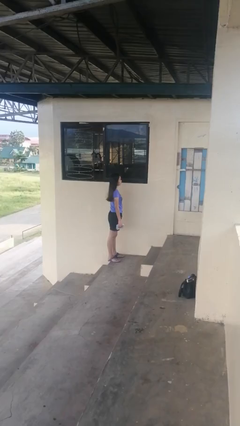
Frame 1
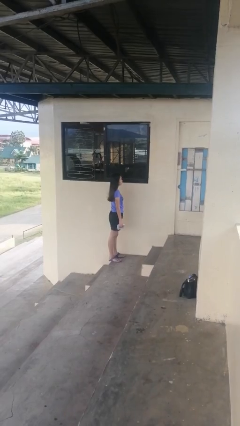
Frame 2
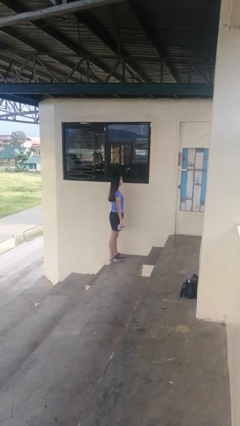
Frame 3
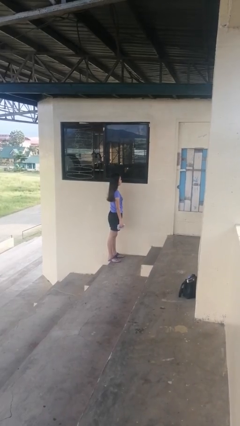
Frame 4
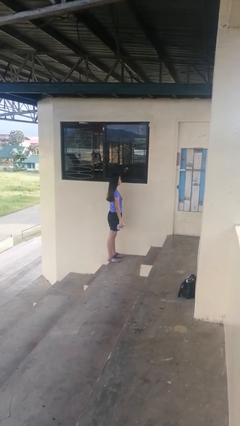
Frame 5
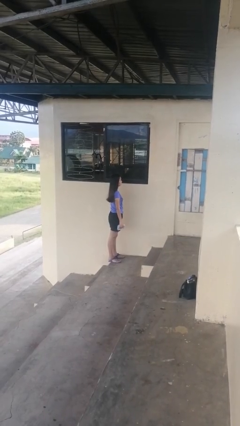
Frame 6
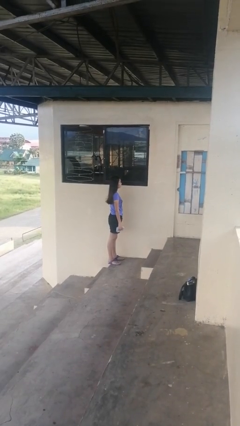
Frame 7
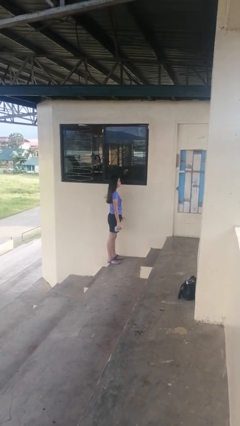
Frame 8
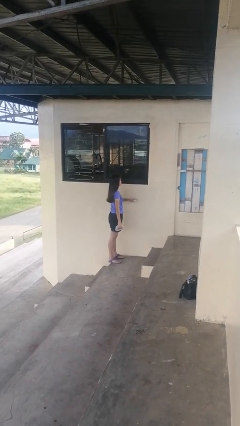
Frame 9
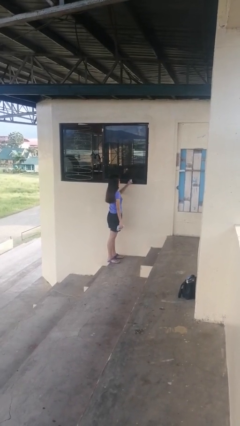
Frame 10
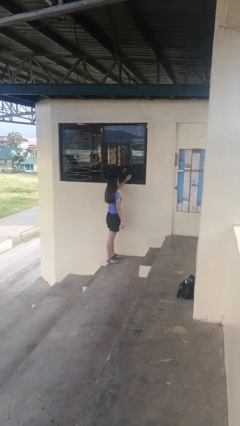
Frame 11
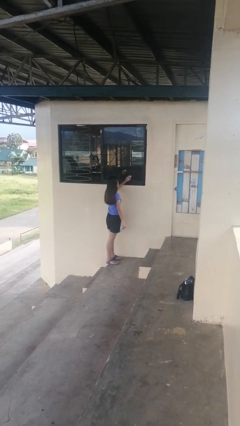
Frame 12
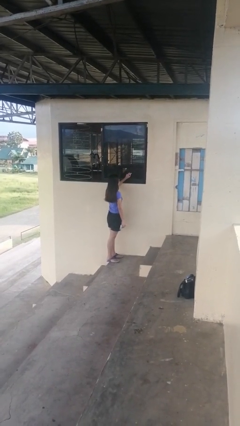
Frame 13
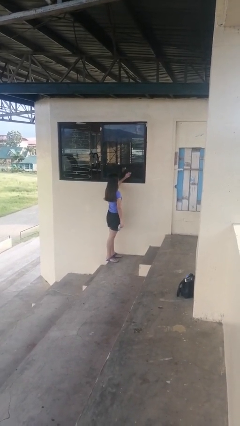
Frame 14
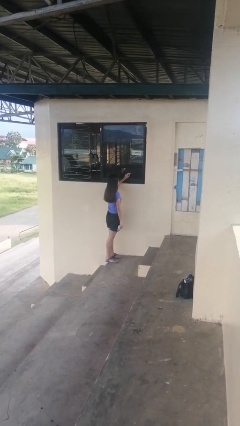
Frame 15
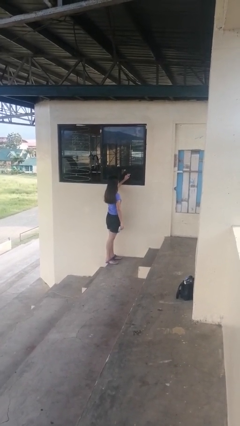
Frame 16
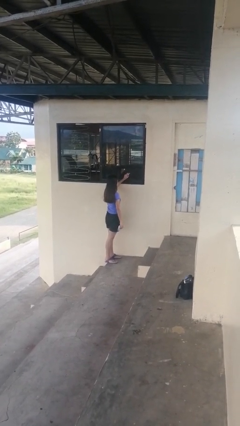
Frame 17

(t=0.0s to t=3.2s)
person sprays from bottle

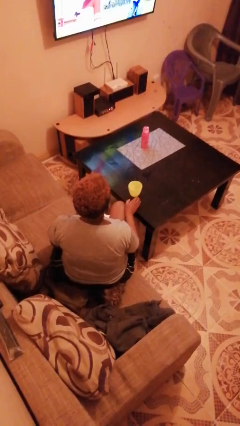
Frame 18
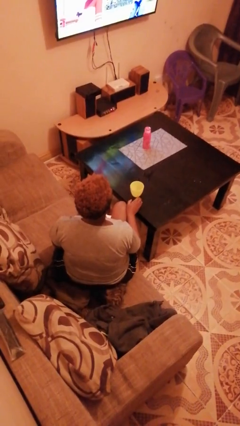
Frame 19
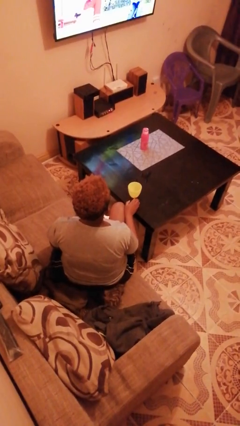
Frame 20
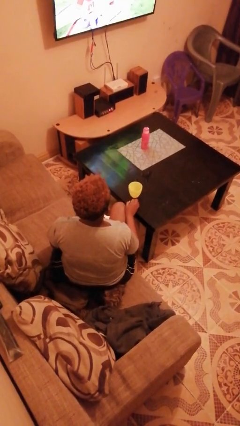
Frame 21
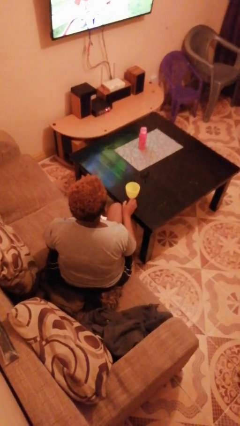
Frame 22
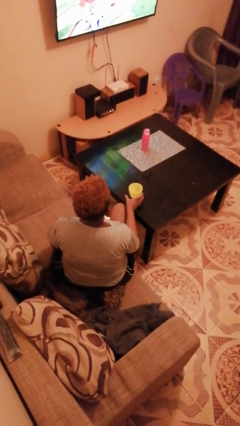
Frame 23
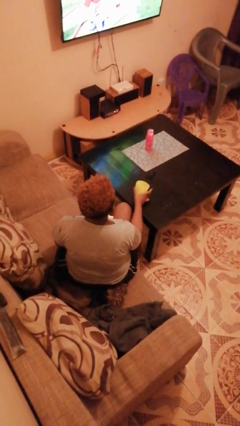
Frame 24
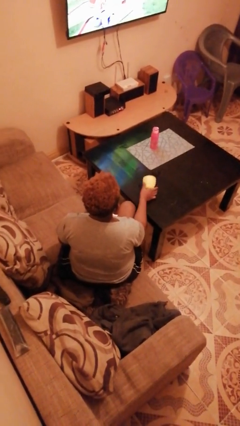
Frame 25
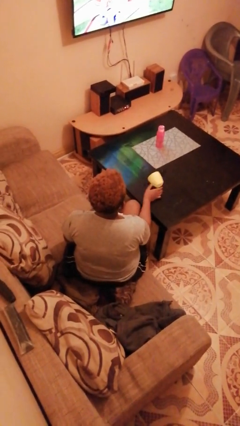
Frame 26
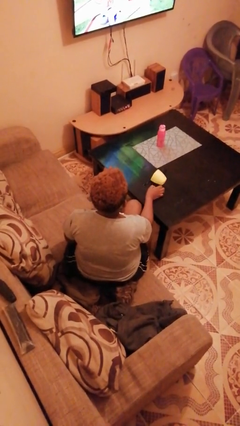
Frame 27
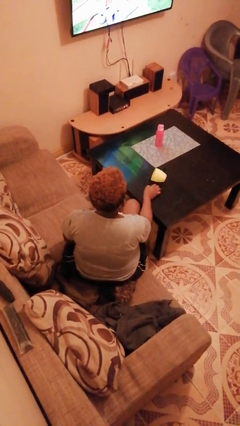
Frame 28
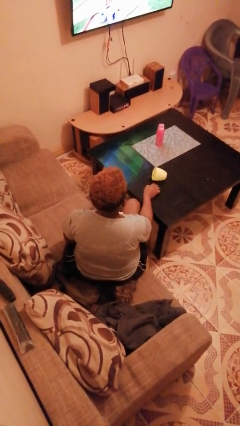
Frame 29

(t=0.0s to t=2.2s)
person spills on table

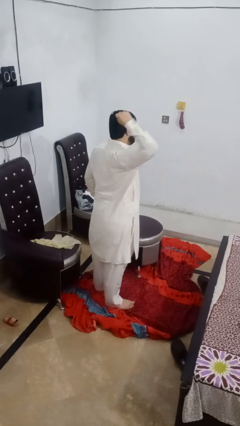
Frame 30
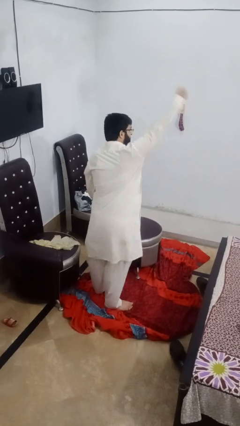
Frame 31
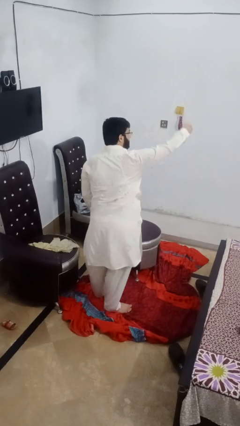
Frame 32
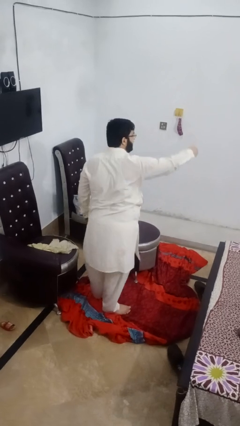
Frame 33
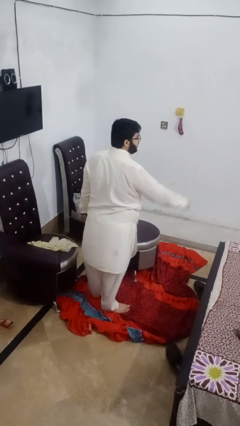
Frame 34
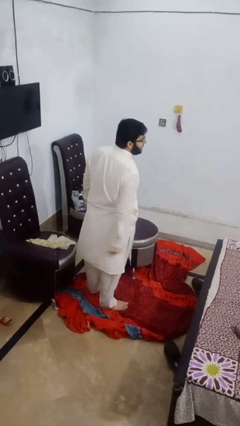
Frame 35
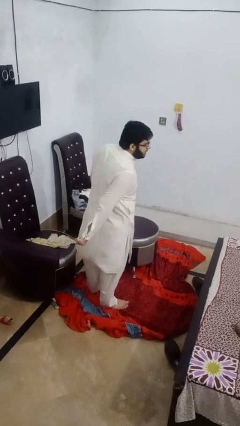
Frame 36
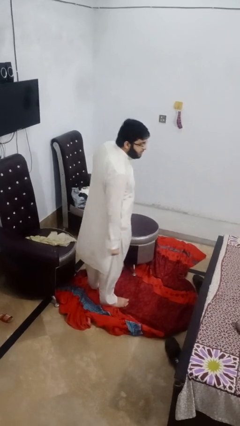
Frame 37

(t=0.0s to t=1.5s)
person punches

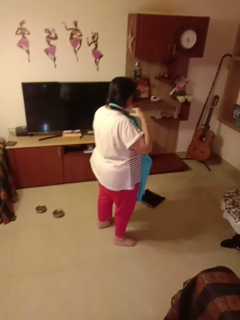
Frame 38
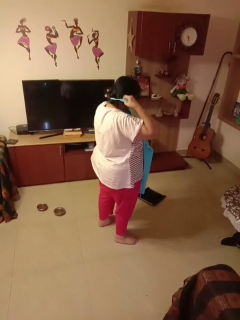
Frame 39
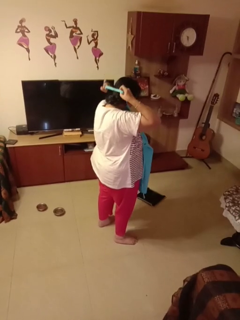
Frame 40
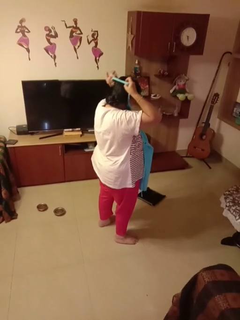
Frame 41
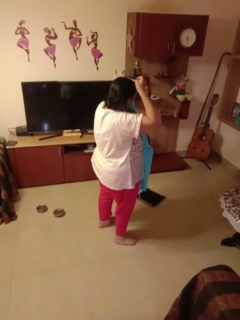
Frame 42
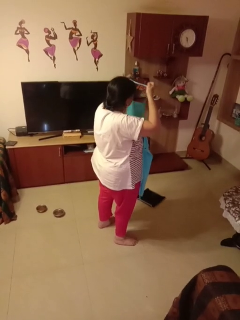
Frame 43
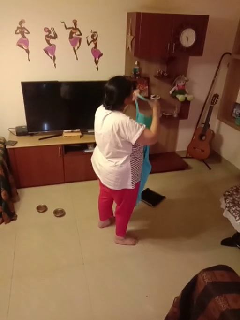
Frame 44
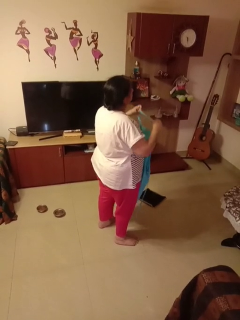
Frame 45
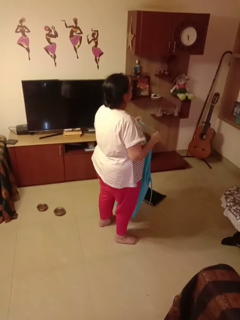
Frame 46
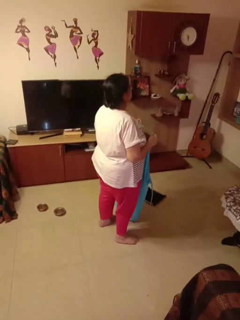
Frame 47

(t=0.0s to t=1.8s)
person takes off apron

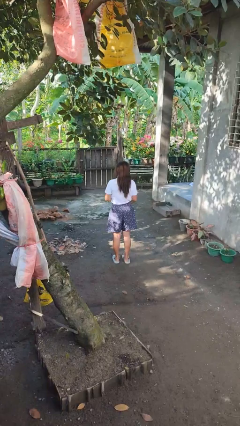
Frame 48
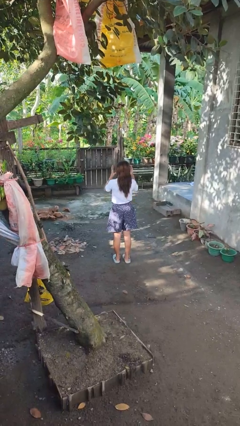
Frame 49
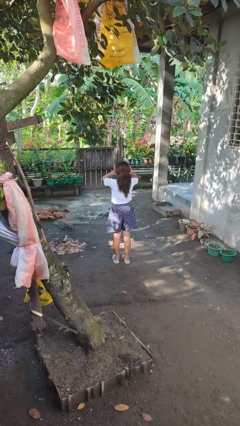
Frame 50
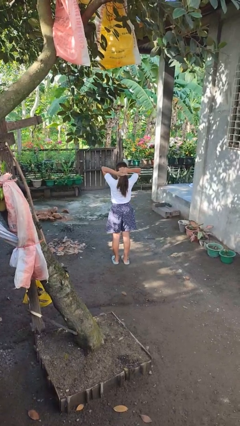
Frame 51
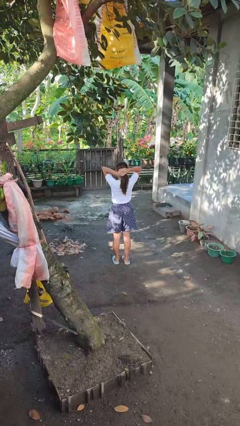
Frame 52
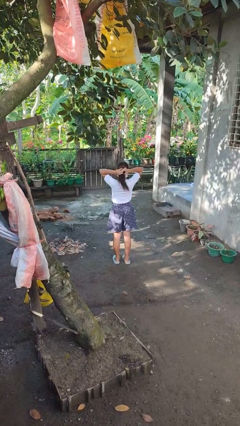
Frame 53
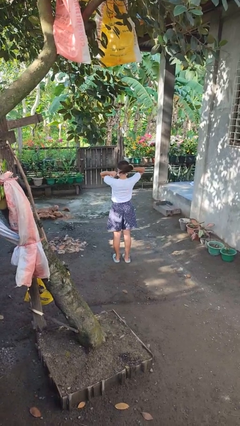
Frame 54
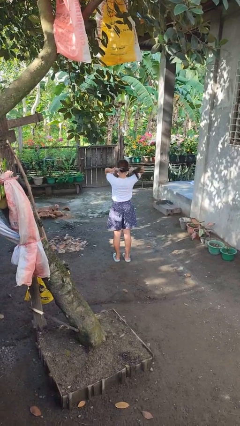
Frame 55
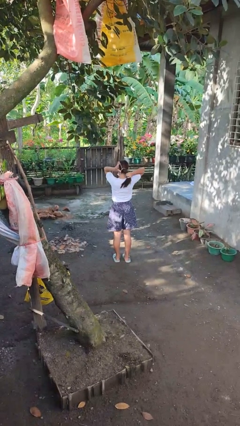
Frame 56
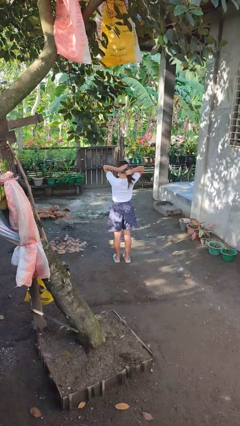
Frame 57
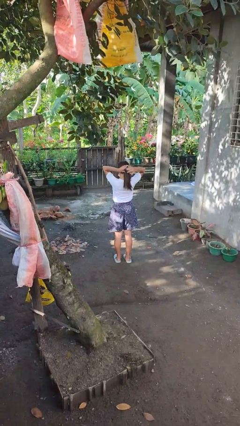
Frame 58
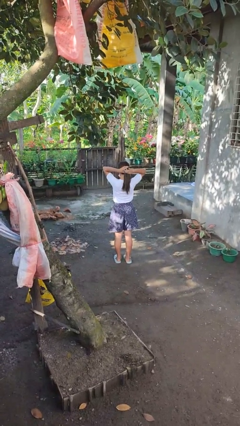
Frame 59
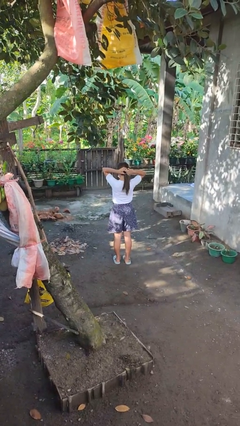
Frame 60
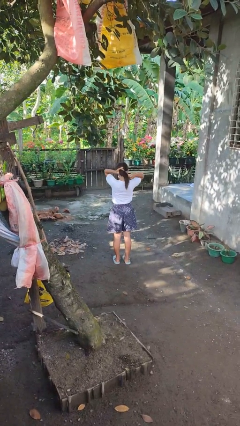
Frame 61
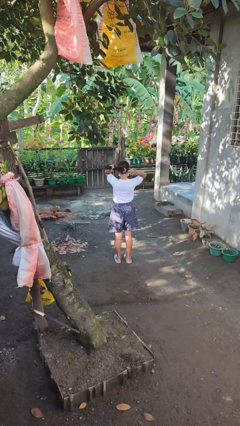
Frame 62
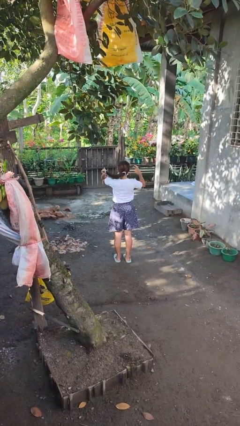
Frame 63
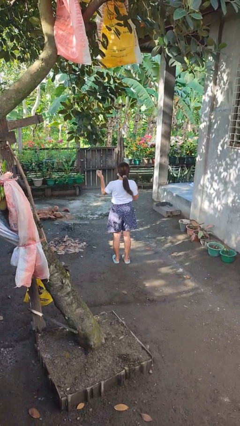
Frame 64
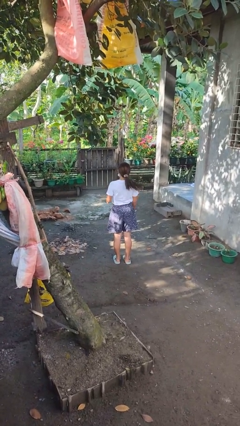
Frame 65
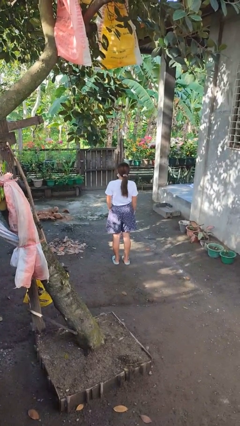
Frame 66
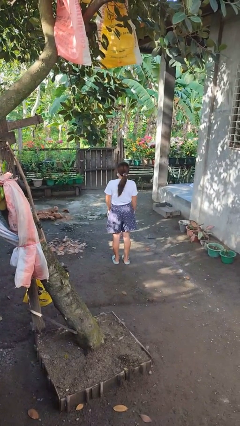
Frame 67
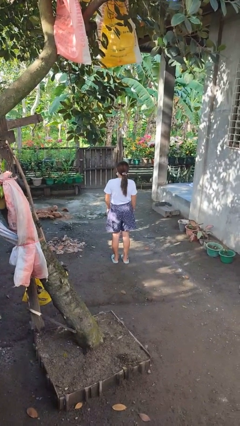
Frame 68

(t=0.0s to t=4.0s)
person puts hair in ponytail

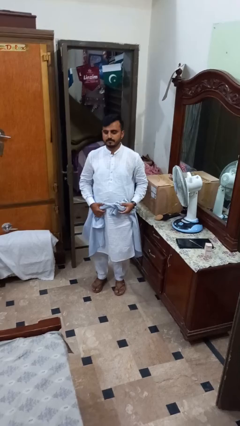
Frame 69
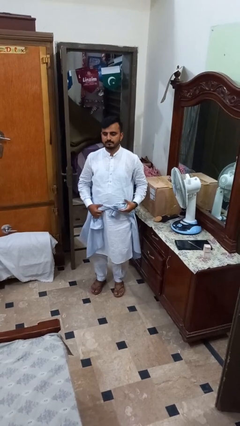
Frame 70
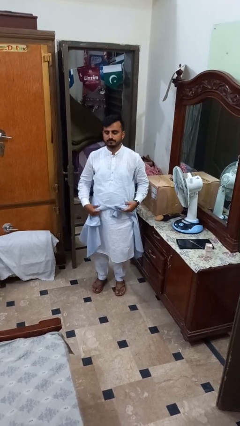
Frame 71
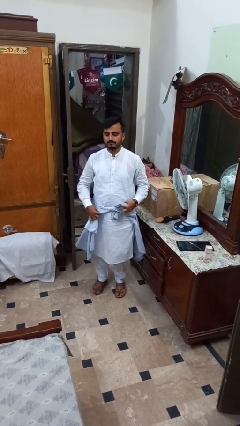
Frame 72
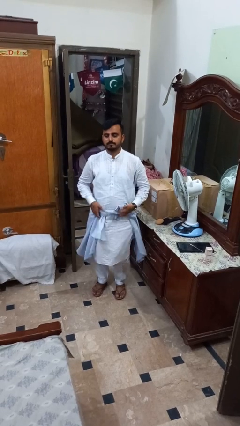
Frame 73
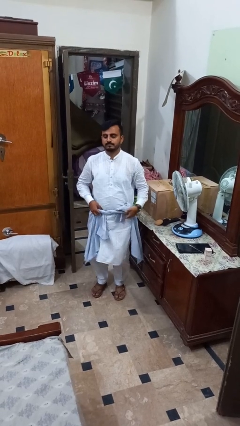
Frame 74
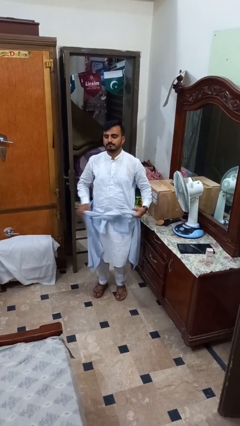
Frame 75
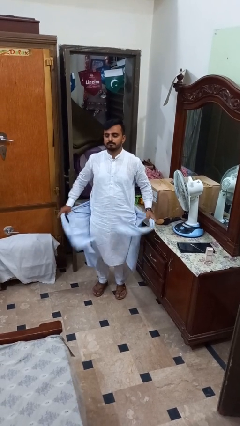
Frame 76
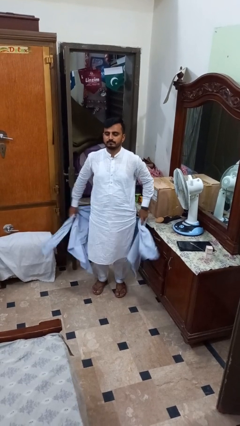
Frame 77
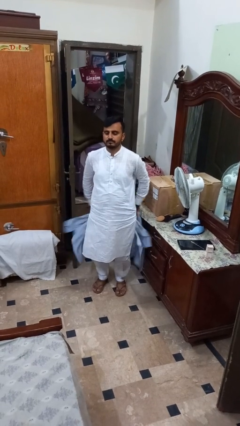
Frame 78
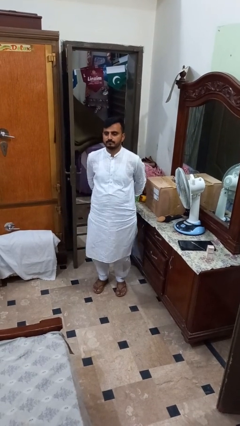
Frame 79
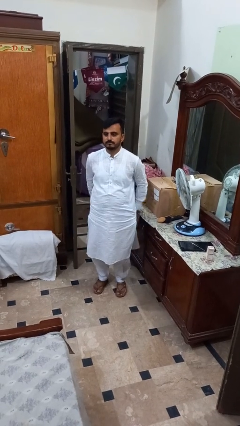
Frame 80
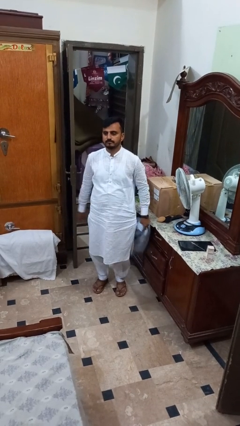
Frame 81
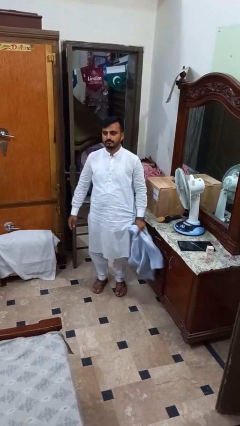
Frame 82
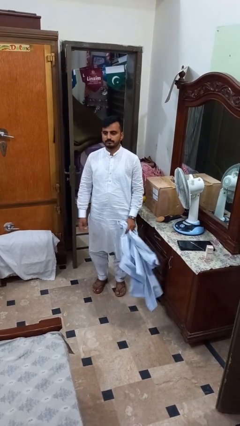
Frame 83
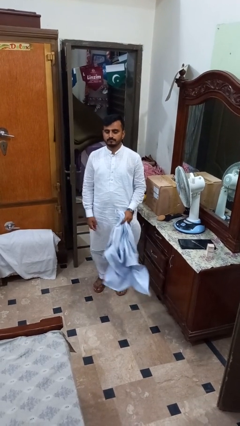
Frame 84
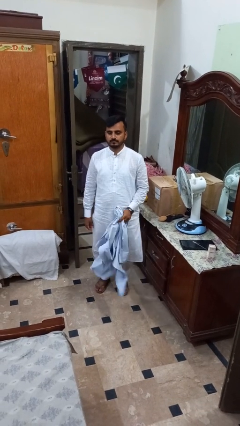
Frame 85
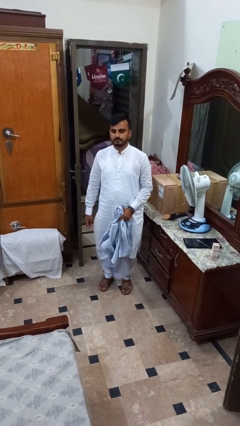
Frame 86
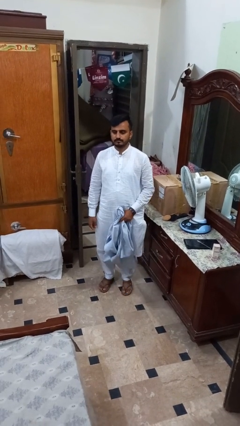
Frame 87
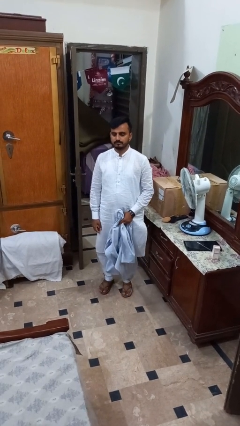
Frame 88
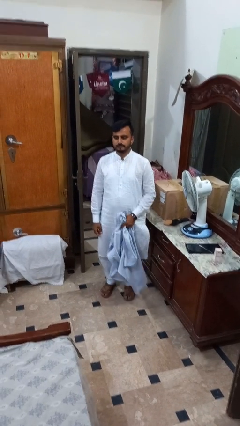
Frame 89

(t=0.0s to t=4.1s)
person unties jacket around waist

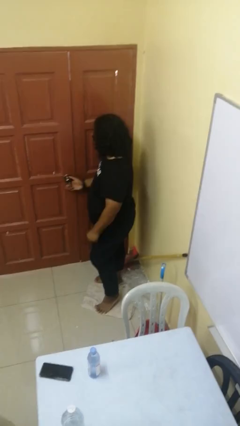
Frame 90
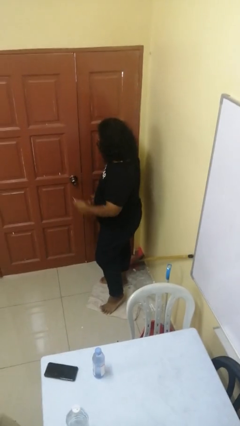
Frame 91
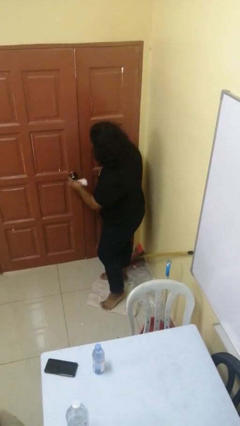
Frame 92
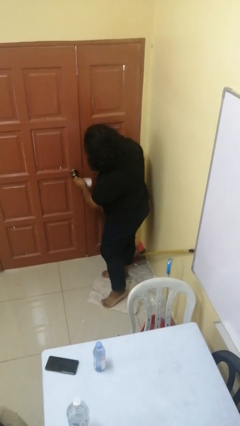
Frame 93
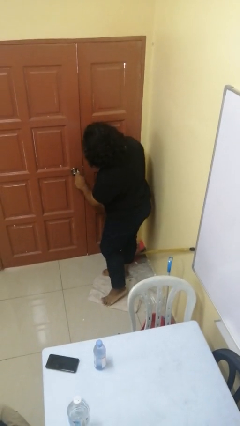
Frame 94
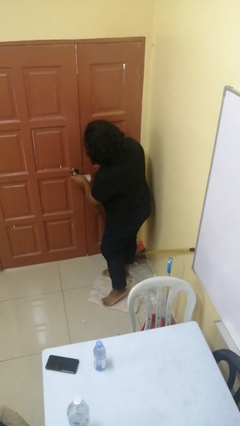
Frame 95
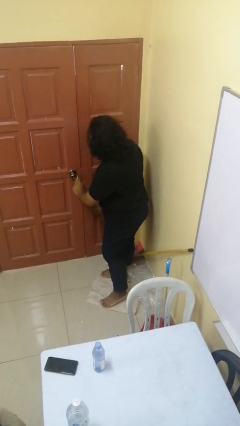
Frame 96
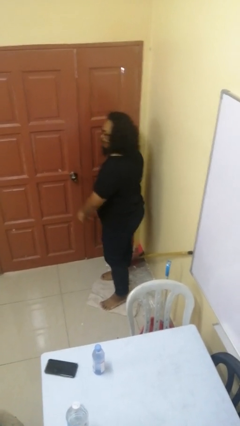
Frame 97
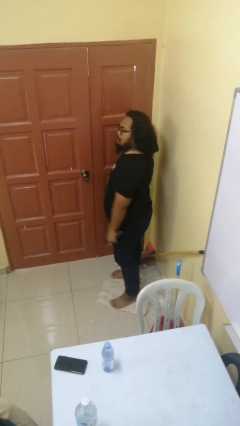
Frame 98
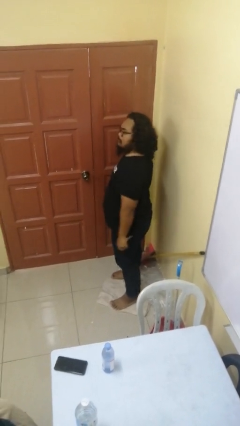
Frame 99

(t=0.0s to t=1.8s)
person locks door with keys
